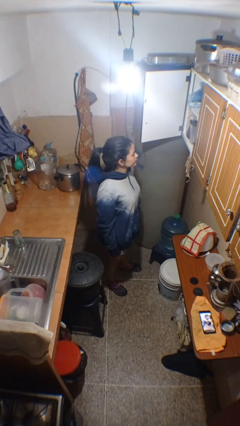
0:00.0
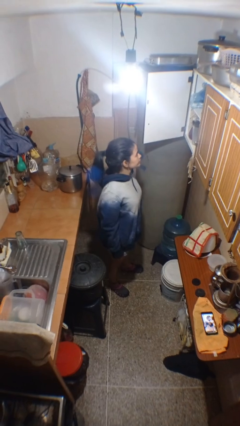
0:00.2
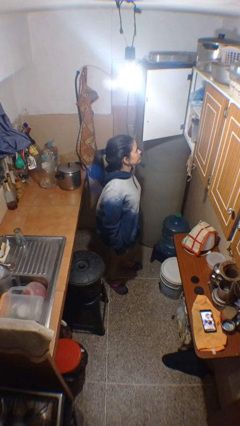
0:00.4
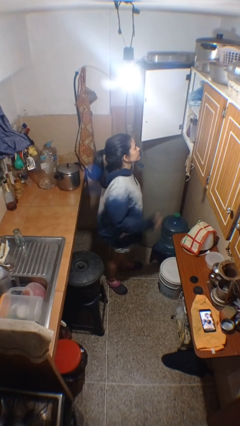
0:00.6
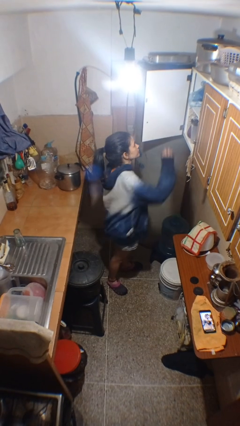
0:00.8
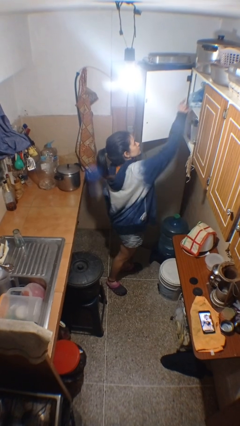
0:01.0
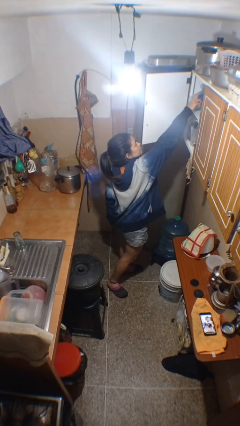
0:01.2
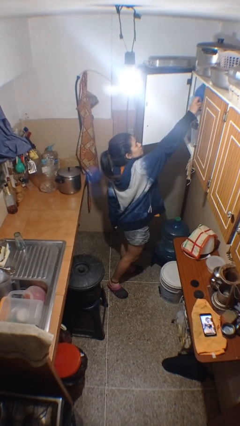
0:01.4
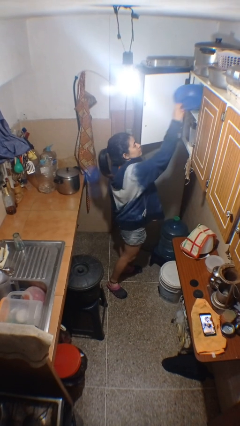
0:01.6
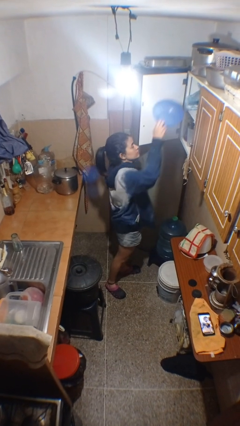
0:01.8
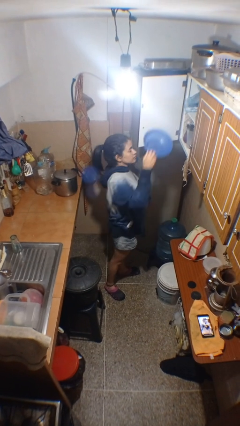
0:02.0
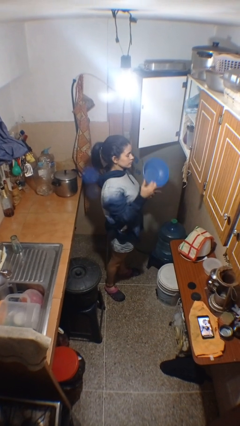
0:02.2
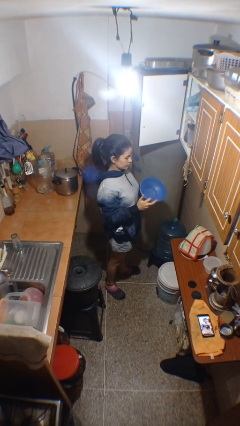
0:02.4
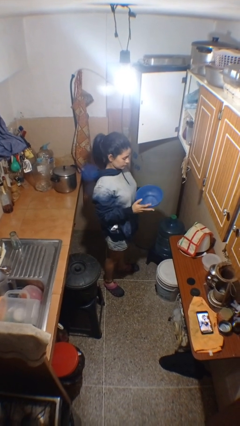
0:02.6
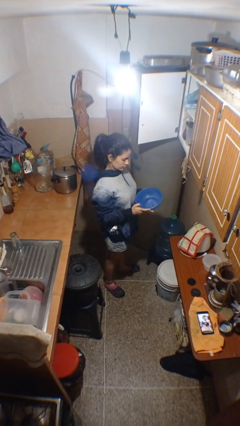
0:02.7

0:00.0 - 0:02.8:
person picks up object from cabinet

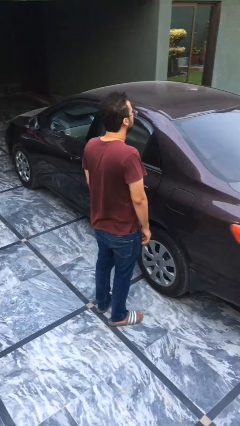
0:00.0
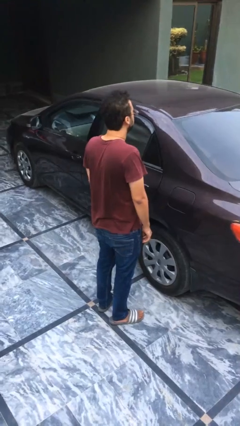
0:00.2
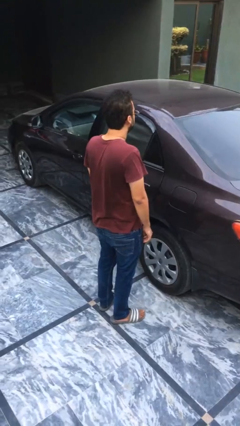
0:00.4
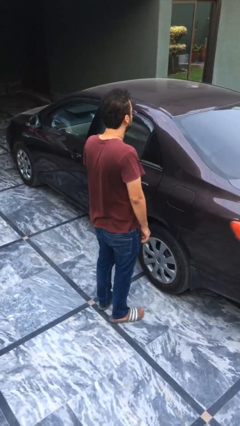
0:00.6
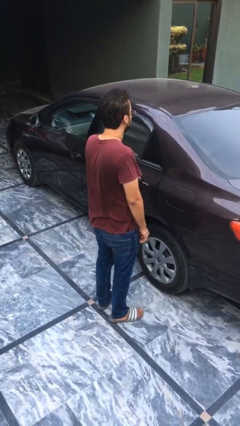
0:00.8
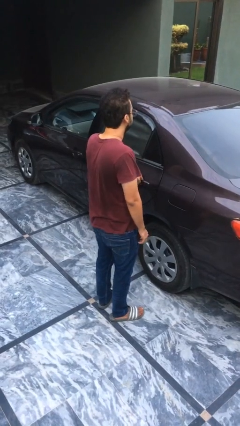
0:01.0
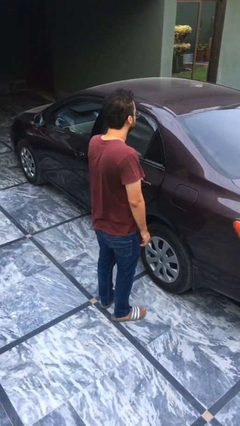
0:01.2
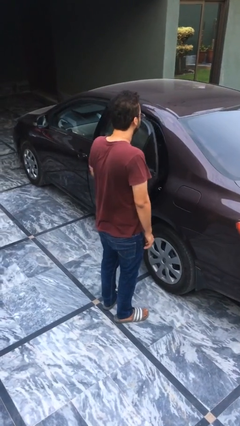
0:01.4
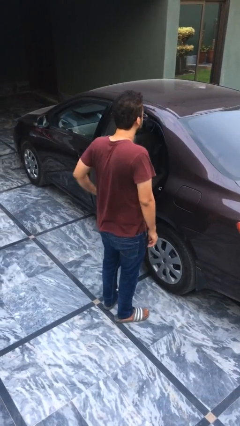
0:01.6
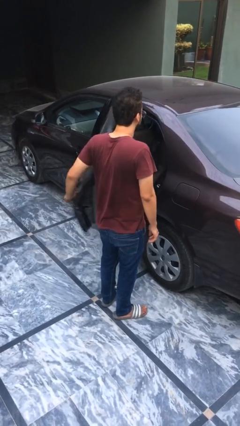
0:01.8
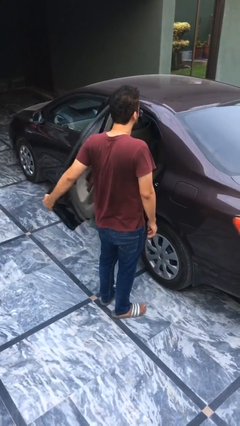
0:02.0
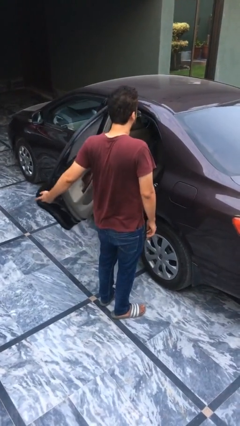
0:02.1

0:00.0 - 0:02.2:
person opens car door

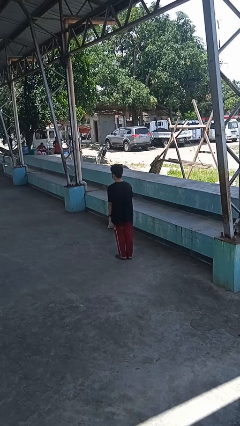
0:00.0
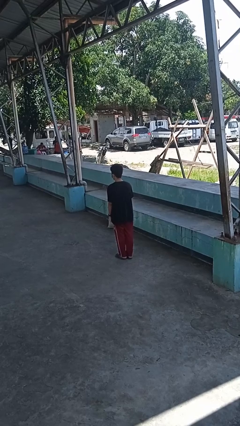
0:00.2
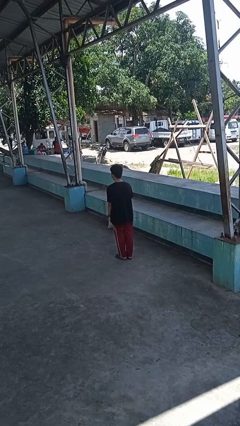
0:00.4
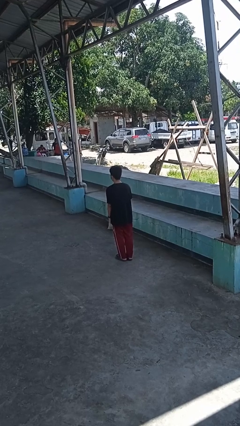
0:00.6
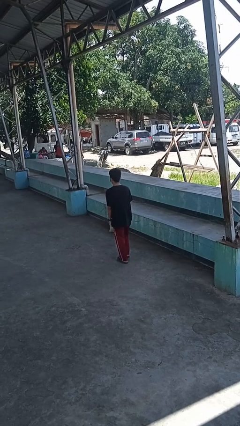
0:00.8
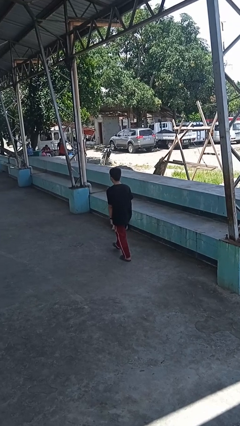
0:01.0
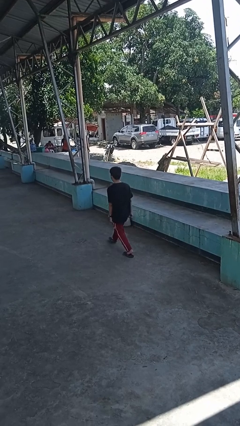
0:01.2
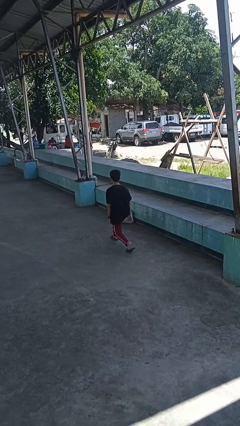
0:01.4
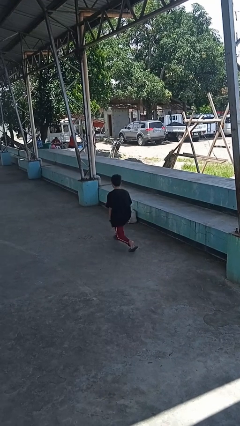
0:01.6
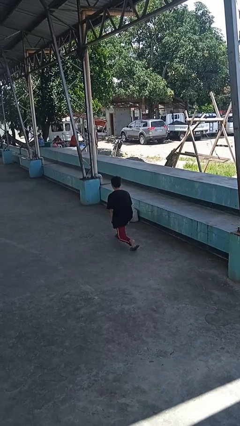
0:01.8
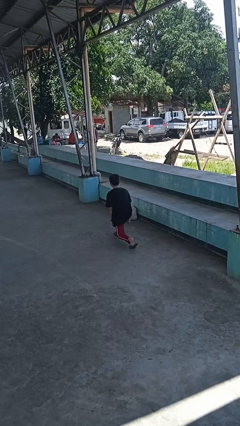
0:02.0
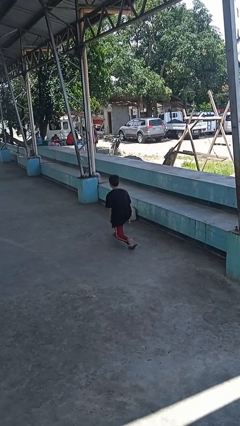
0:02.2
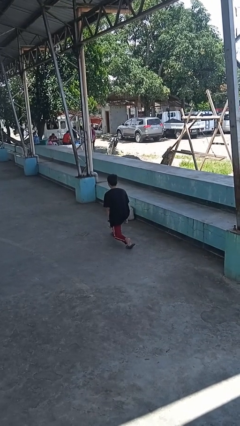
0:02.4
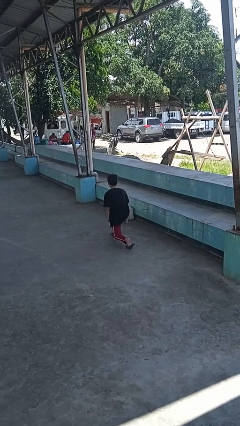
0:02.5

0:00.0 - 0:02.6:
person exercises with lunges

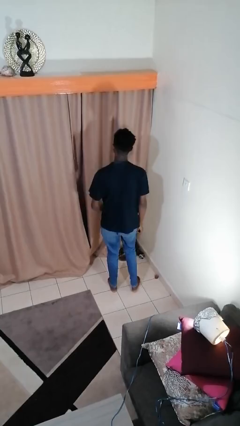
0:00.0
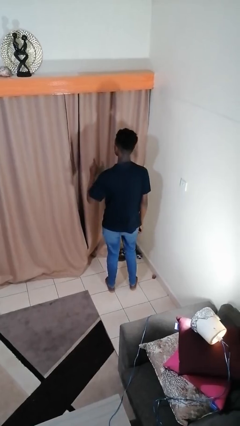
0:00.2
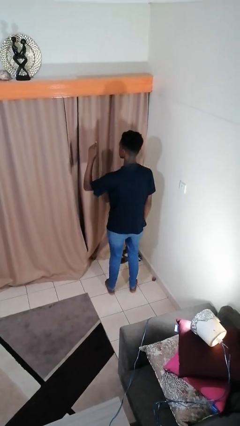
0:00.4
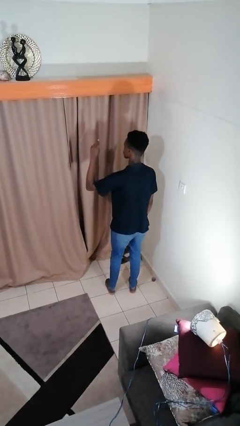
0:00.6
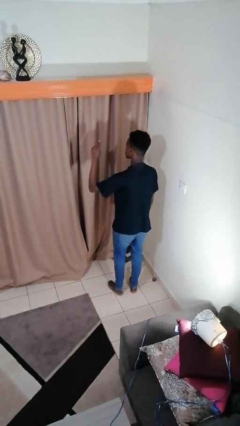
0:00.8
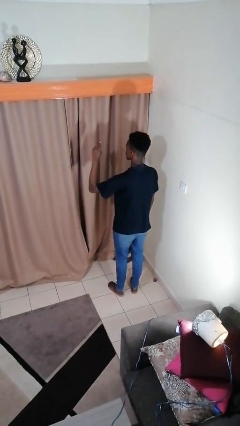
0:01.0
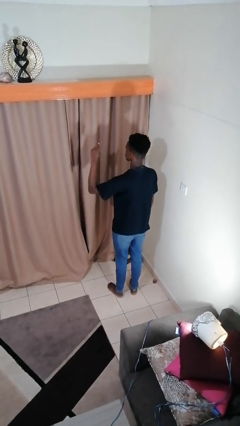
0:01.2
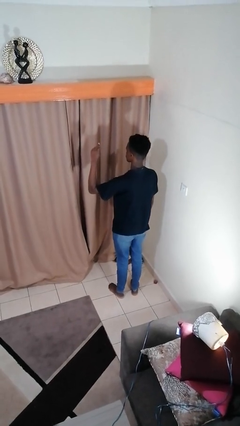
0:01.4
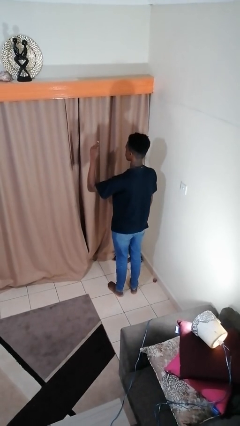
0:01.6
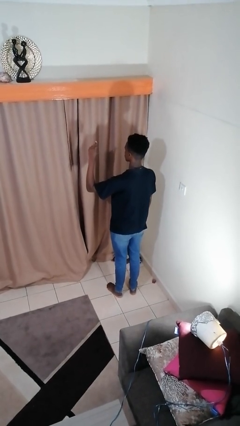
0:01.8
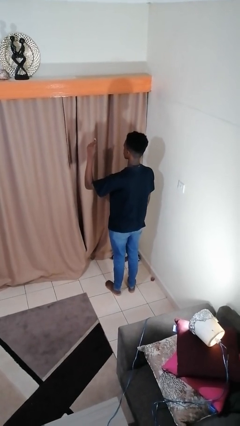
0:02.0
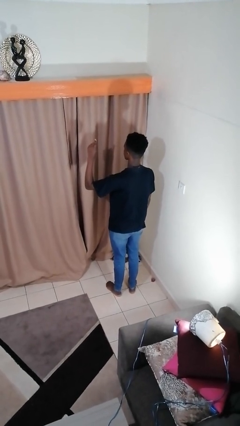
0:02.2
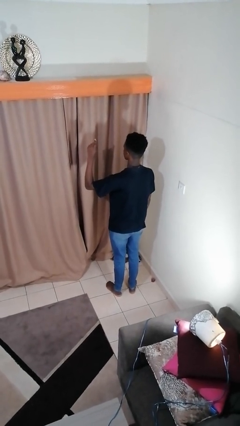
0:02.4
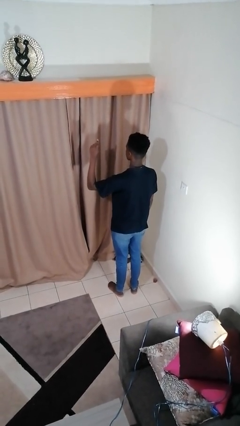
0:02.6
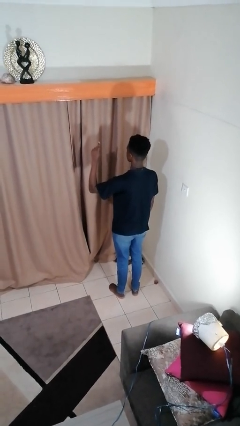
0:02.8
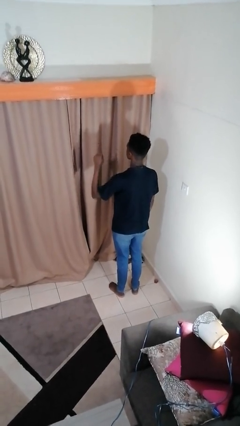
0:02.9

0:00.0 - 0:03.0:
person gestures number one

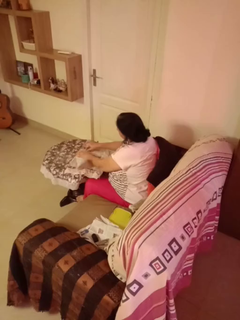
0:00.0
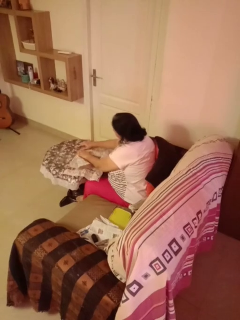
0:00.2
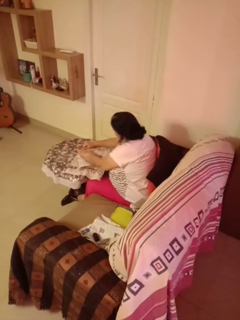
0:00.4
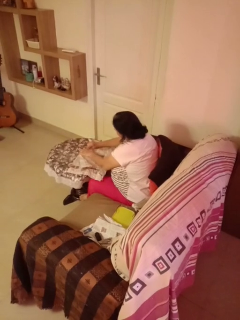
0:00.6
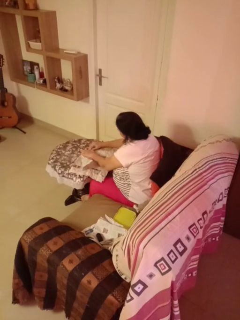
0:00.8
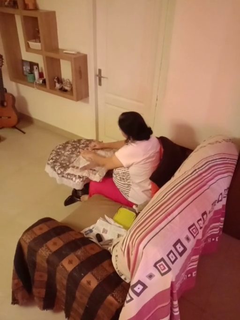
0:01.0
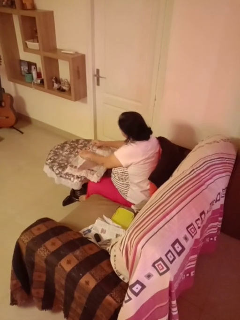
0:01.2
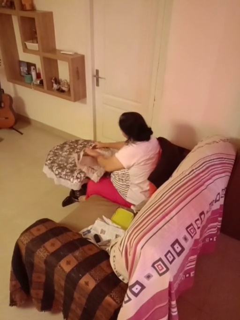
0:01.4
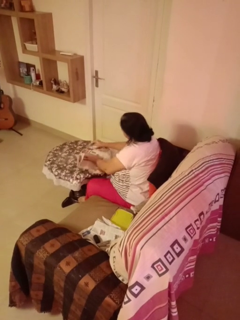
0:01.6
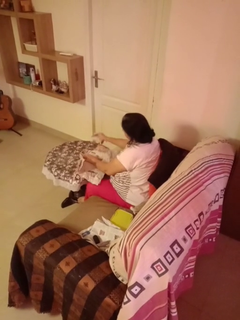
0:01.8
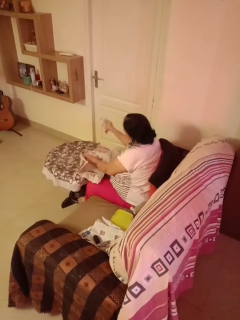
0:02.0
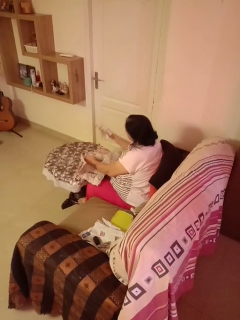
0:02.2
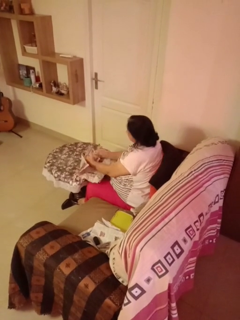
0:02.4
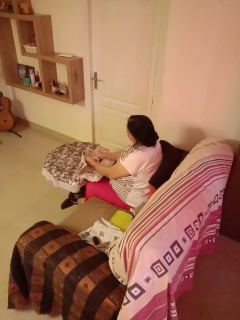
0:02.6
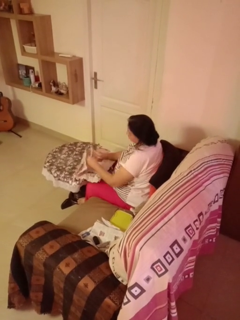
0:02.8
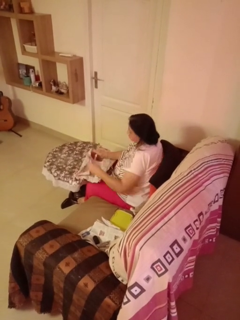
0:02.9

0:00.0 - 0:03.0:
person tears paper

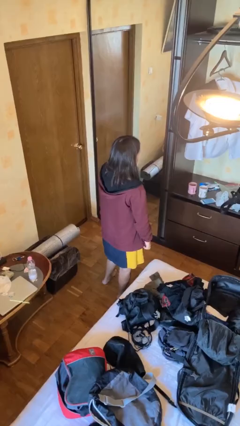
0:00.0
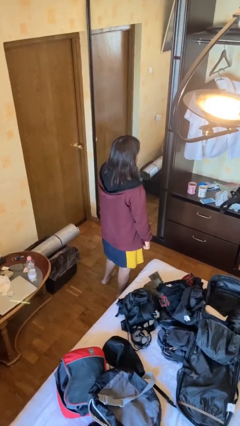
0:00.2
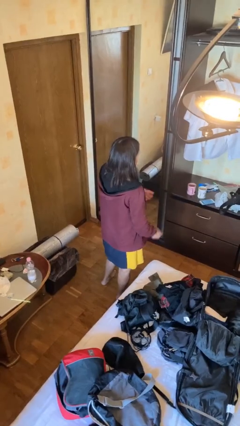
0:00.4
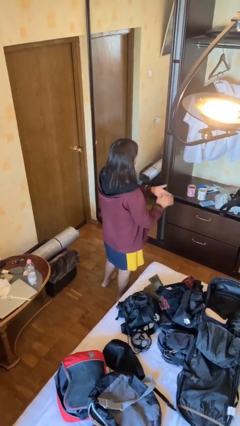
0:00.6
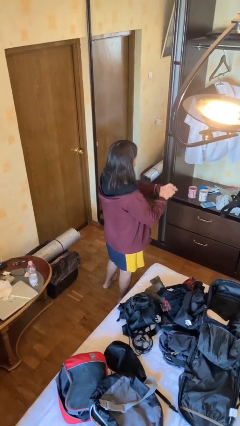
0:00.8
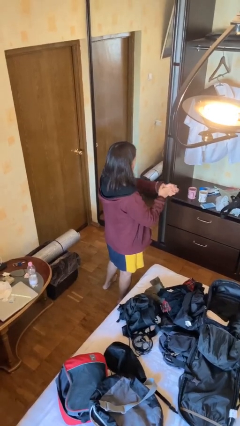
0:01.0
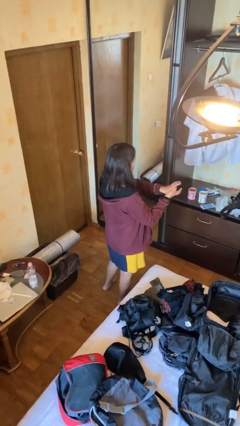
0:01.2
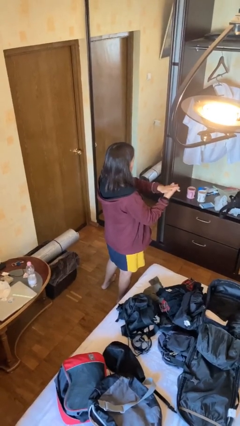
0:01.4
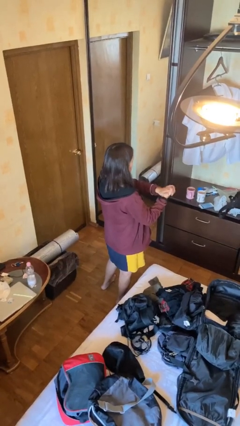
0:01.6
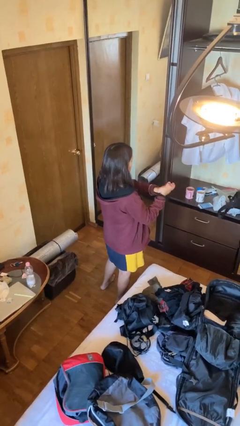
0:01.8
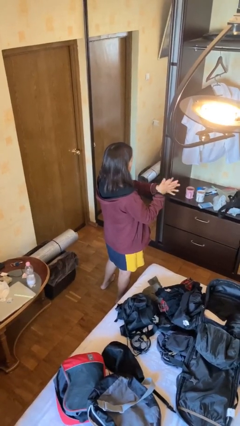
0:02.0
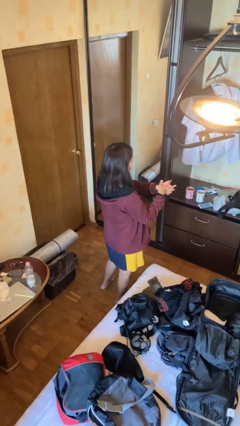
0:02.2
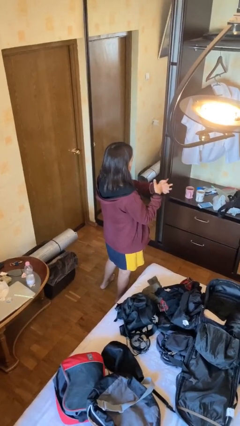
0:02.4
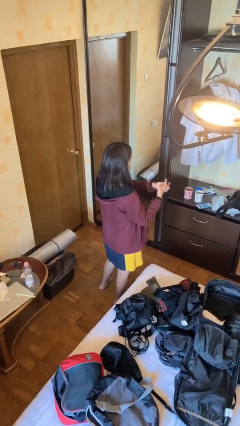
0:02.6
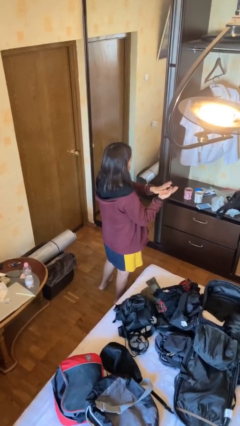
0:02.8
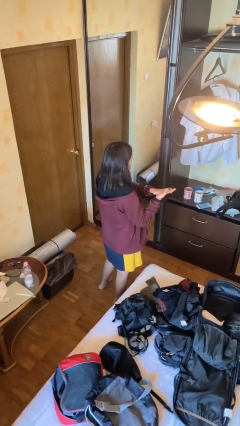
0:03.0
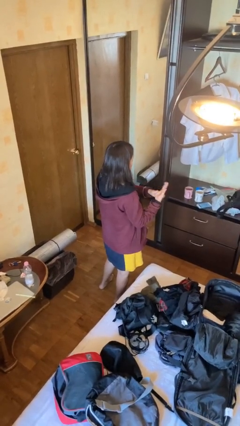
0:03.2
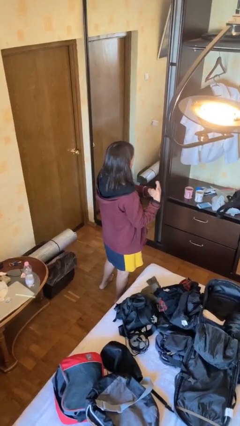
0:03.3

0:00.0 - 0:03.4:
person cracks knuckles

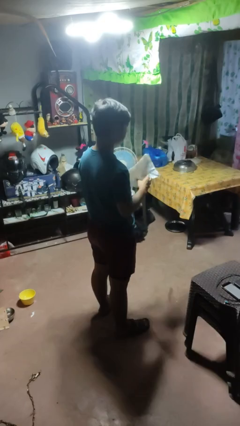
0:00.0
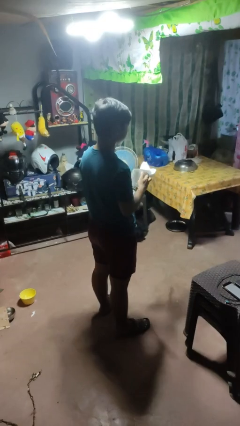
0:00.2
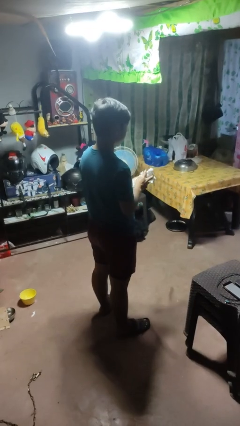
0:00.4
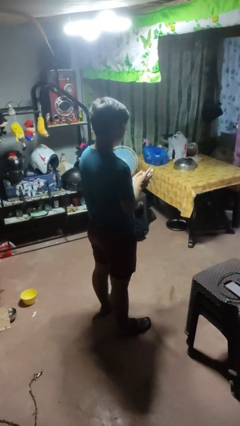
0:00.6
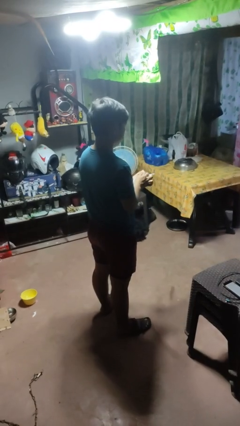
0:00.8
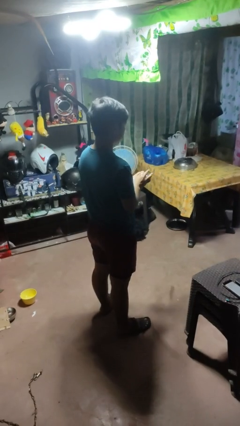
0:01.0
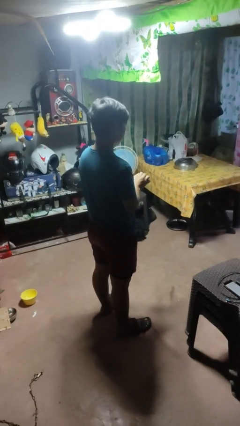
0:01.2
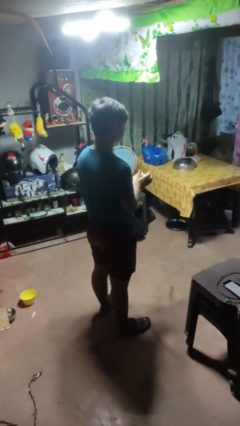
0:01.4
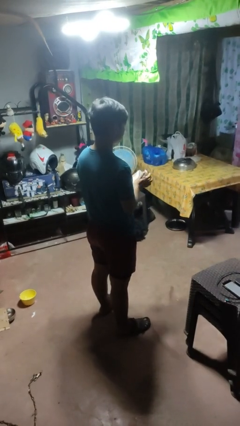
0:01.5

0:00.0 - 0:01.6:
person crumples paper
